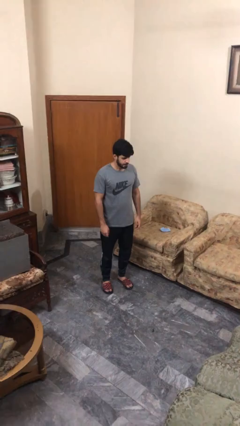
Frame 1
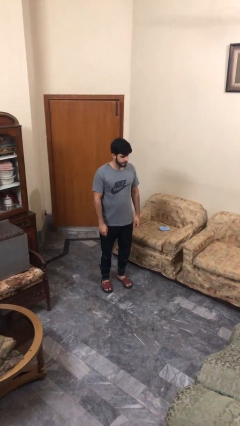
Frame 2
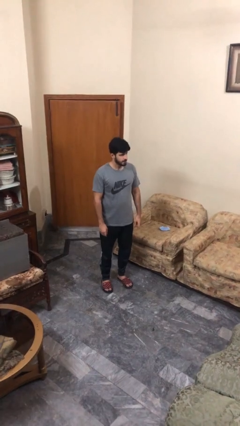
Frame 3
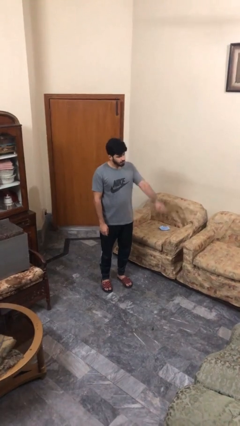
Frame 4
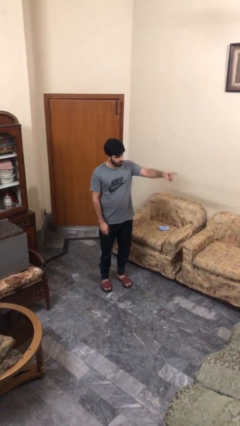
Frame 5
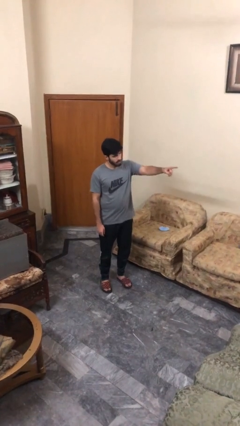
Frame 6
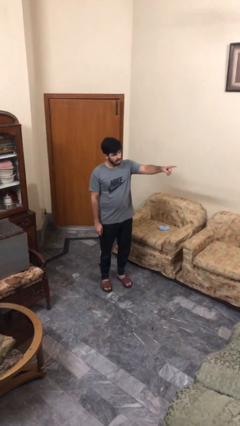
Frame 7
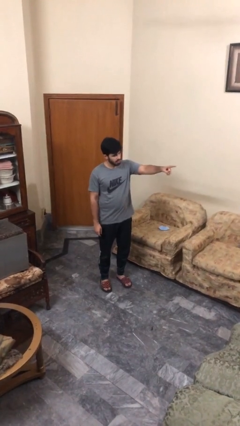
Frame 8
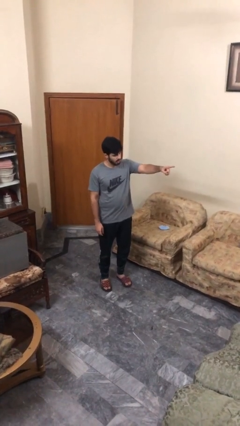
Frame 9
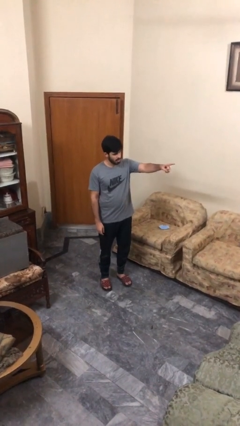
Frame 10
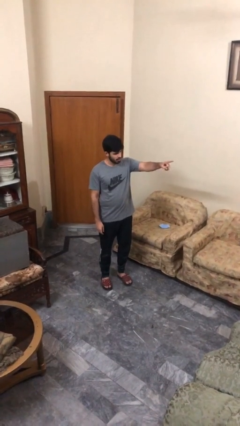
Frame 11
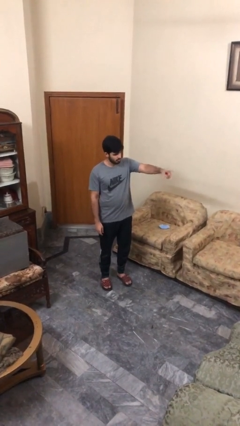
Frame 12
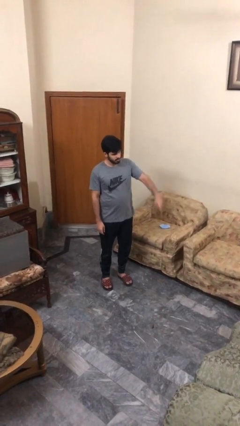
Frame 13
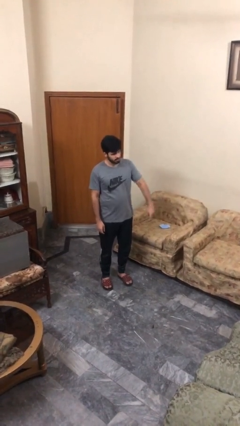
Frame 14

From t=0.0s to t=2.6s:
person points at person

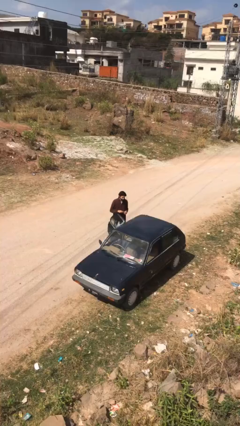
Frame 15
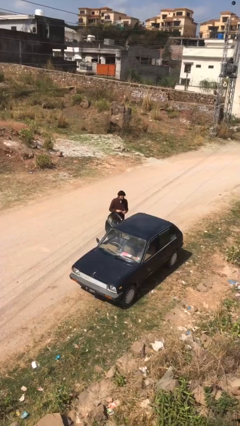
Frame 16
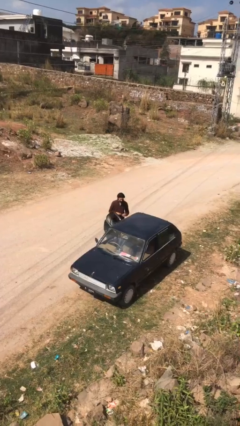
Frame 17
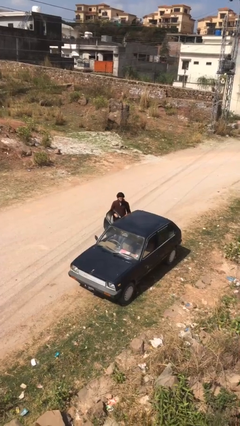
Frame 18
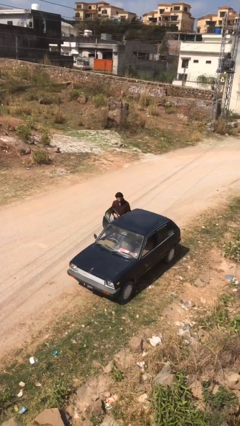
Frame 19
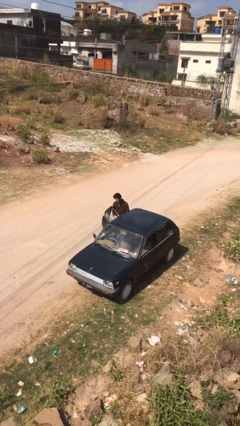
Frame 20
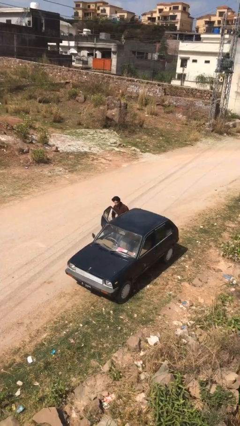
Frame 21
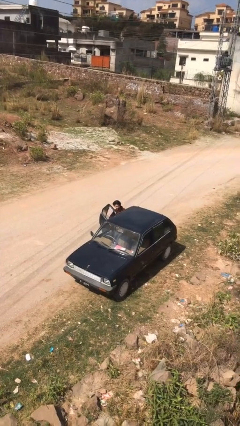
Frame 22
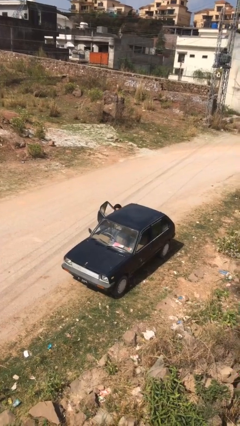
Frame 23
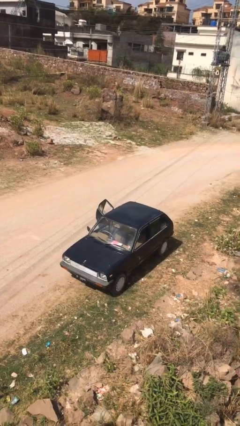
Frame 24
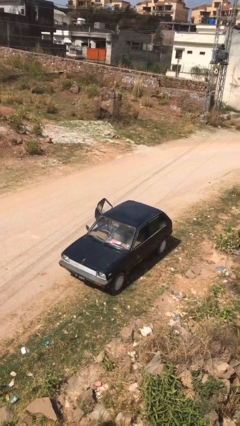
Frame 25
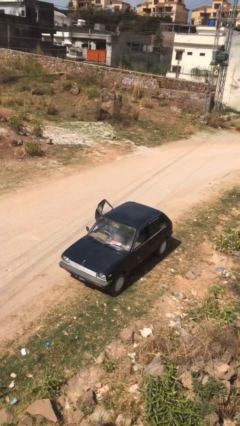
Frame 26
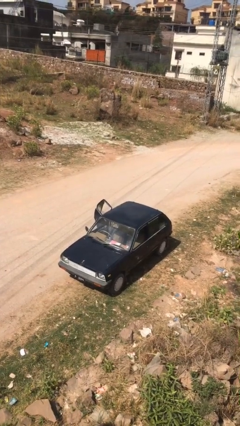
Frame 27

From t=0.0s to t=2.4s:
person enters car

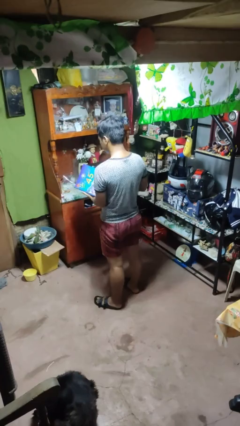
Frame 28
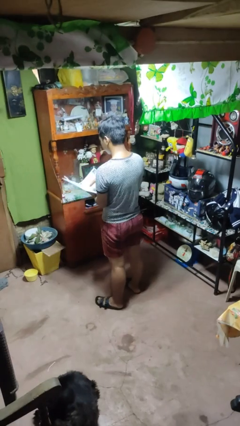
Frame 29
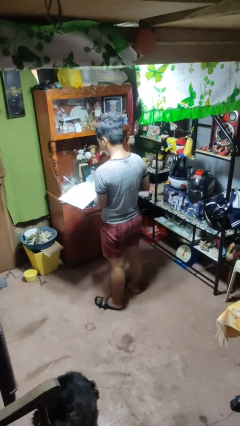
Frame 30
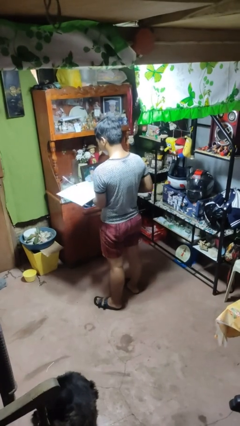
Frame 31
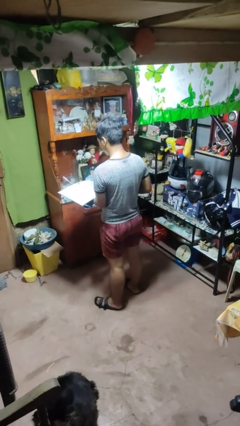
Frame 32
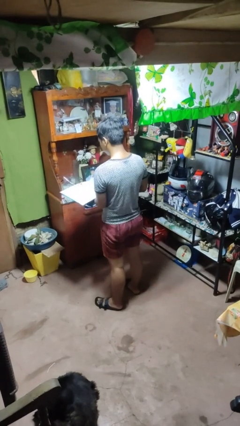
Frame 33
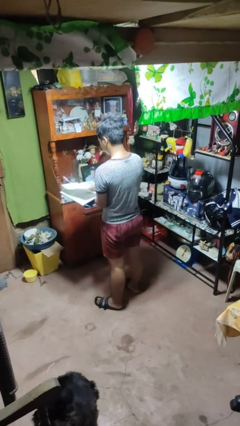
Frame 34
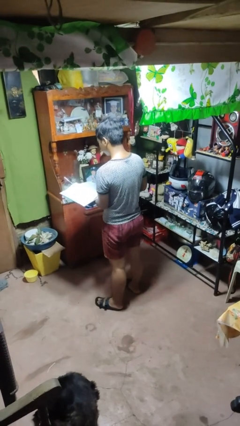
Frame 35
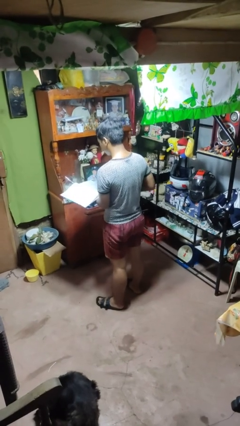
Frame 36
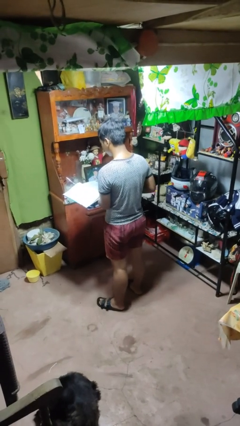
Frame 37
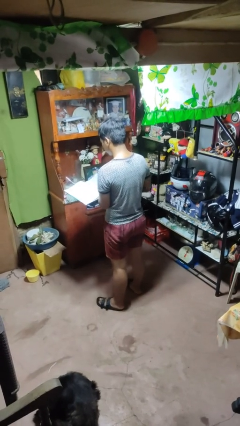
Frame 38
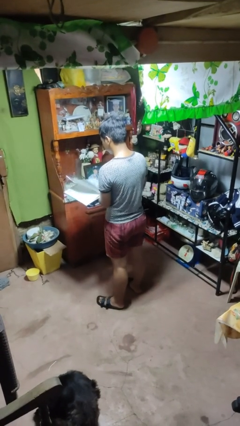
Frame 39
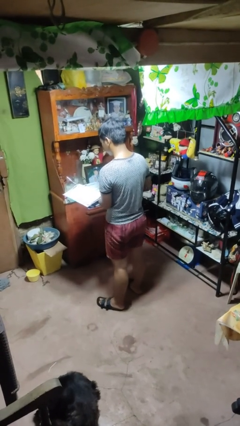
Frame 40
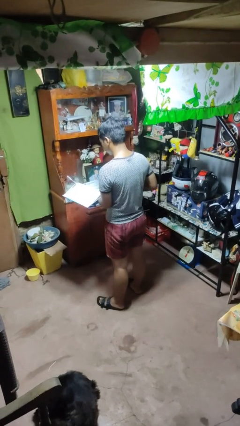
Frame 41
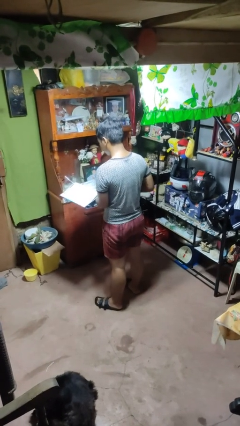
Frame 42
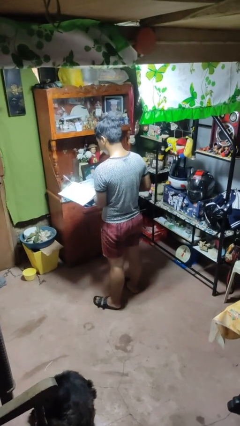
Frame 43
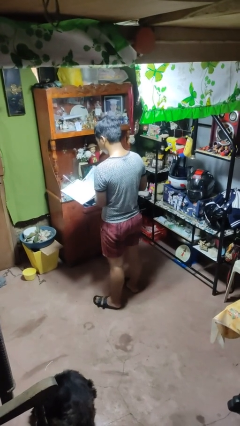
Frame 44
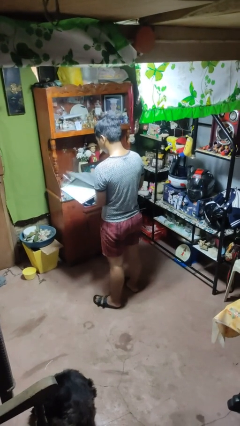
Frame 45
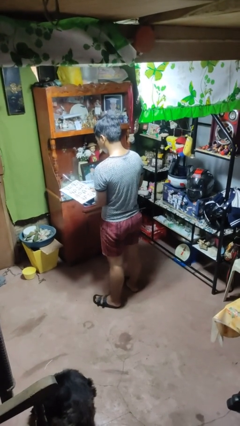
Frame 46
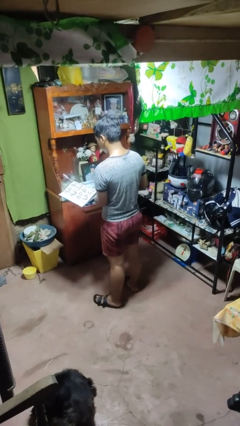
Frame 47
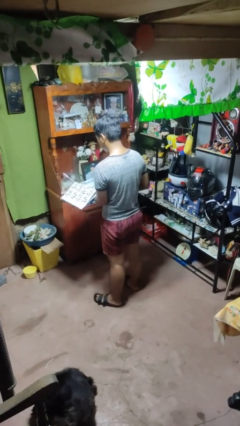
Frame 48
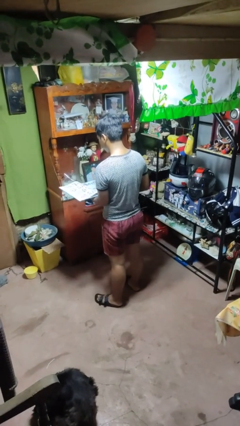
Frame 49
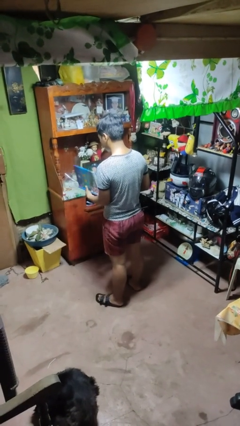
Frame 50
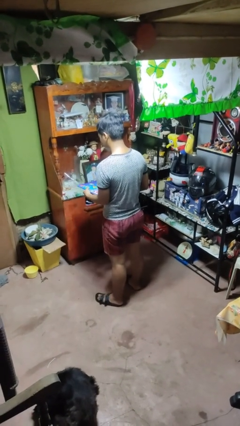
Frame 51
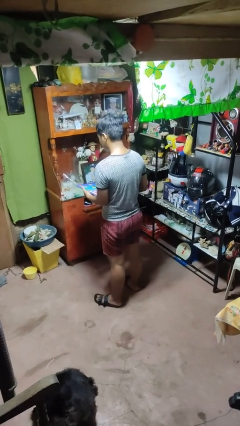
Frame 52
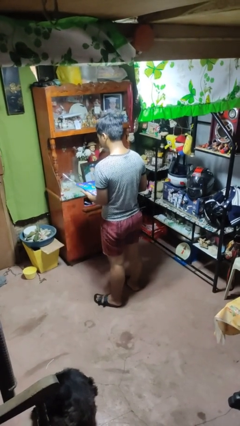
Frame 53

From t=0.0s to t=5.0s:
person reads magazine

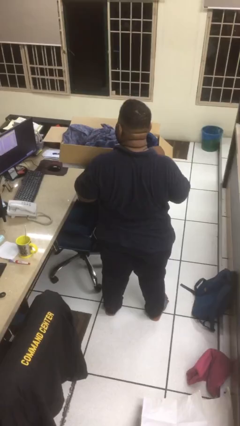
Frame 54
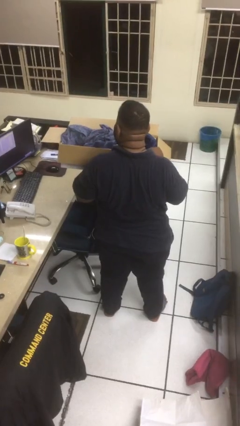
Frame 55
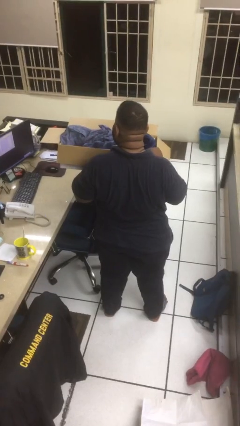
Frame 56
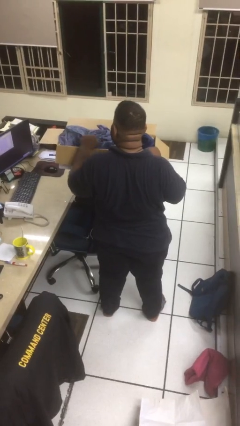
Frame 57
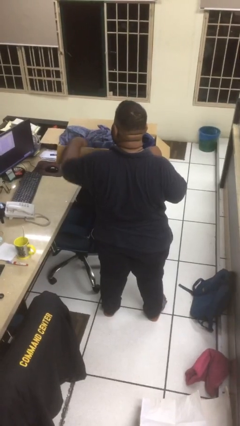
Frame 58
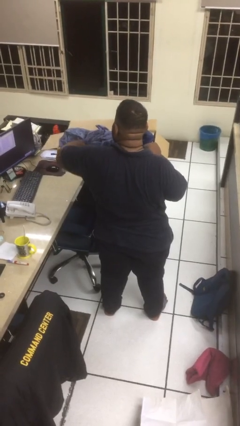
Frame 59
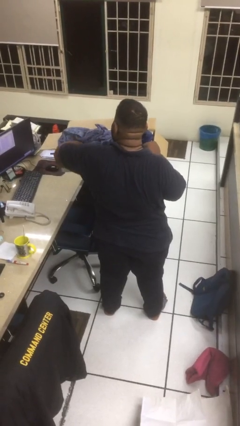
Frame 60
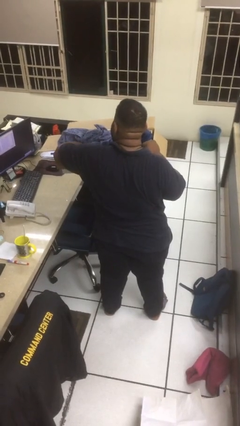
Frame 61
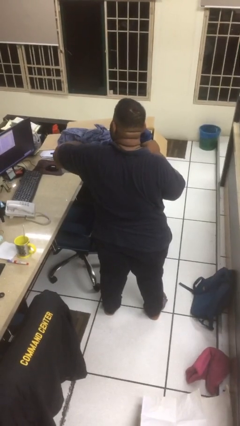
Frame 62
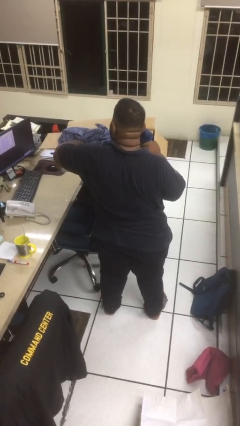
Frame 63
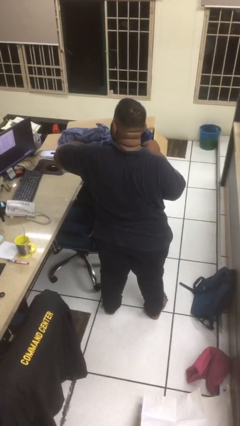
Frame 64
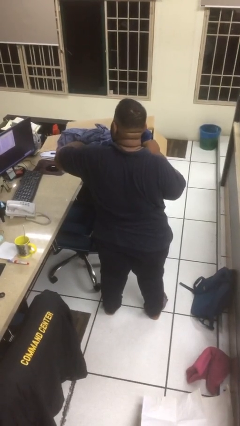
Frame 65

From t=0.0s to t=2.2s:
person searches in box

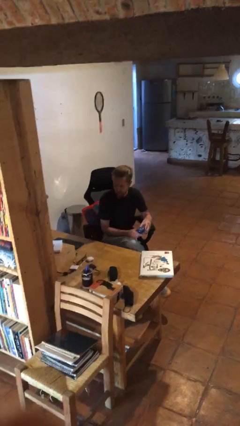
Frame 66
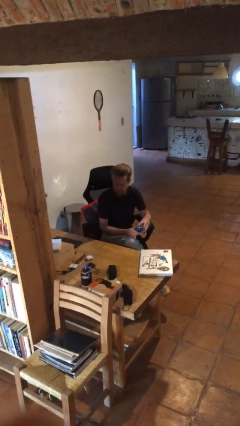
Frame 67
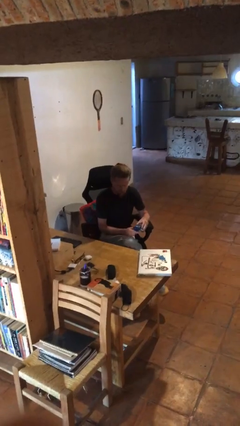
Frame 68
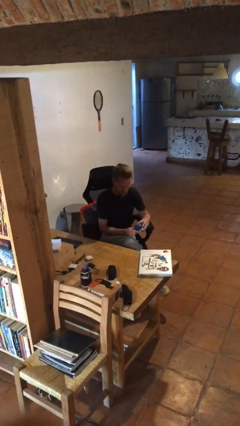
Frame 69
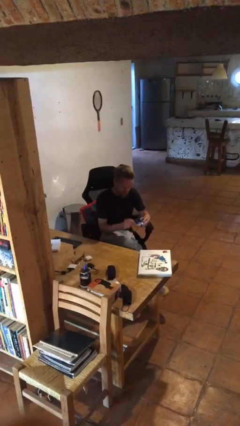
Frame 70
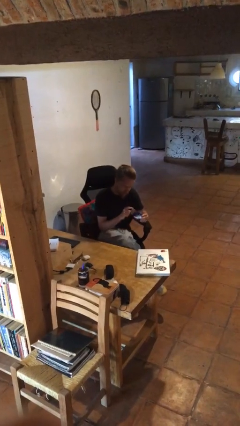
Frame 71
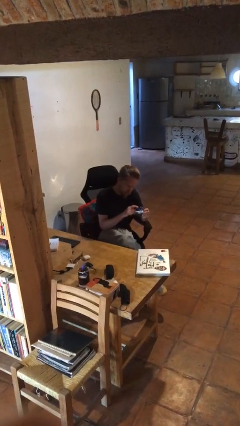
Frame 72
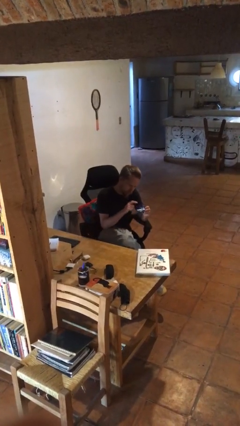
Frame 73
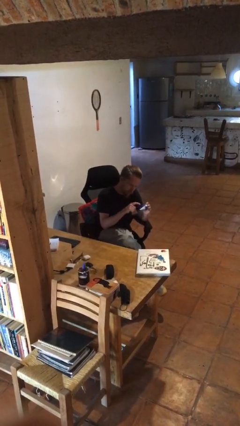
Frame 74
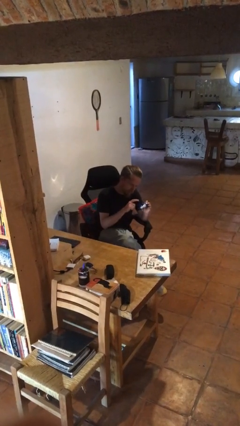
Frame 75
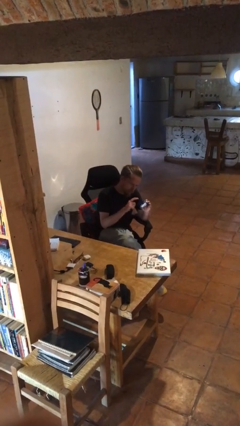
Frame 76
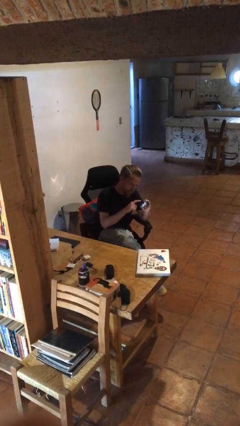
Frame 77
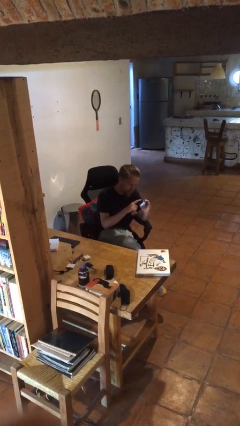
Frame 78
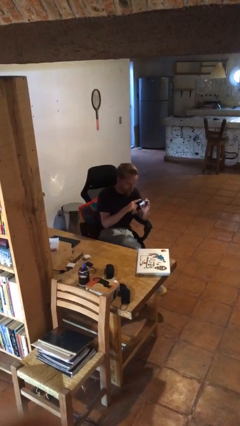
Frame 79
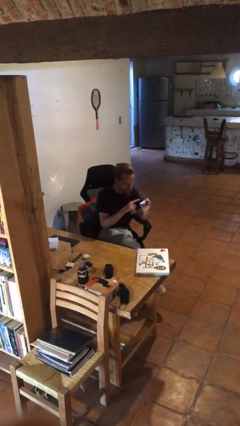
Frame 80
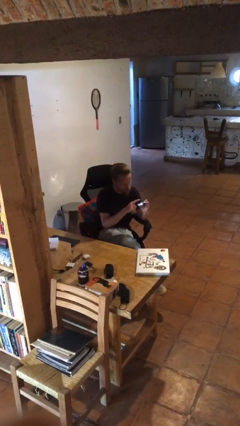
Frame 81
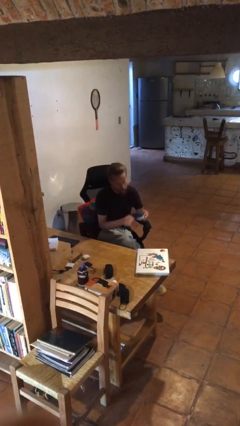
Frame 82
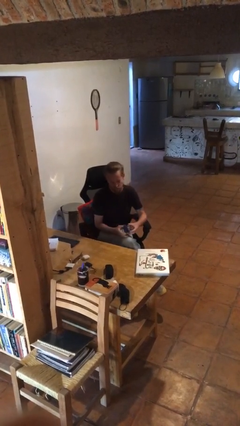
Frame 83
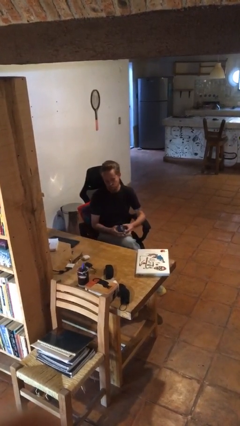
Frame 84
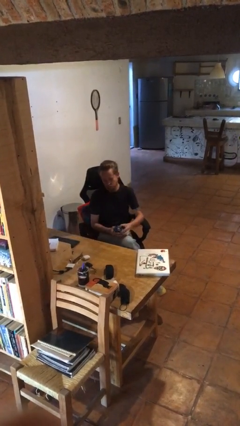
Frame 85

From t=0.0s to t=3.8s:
person taps object with finger

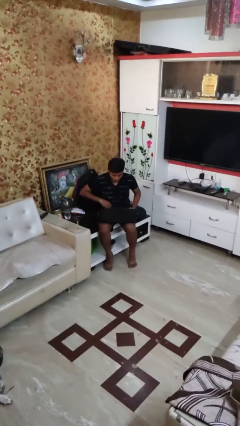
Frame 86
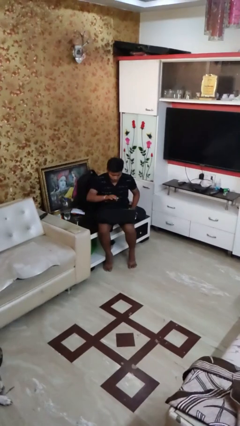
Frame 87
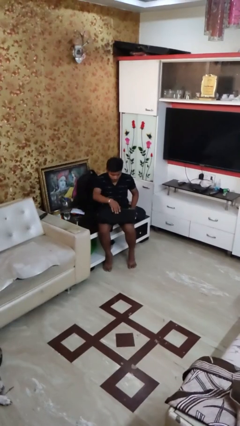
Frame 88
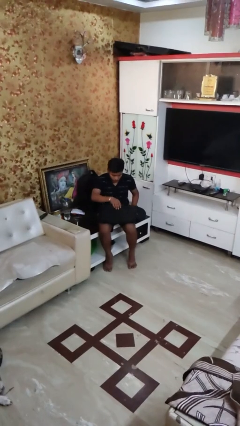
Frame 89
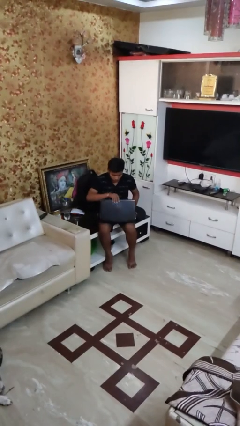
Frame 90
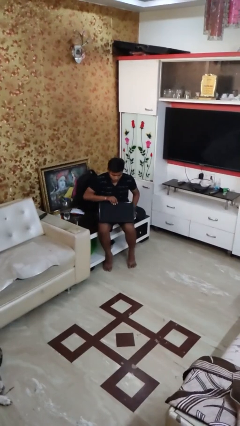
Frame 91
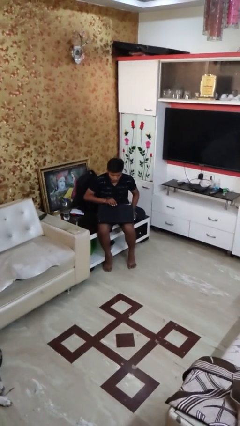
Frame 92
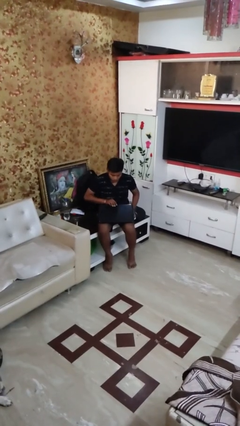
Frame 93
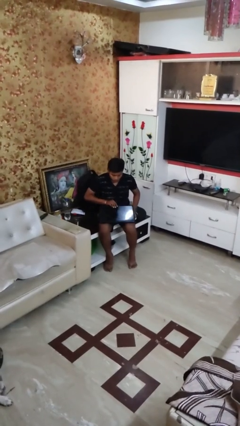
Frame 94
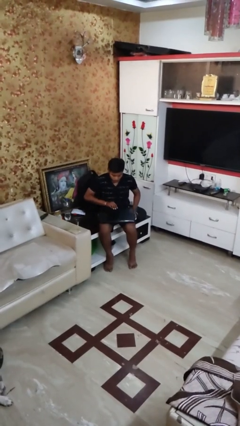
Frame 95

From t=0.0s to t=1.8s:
person closes laptop
